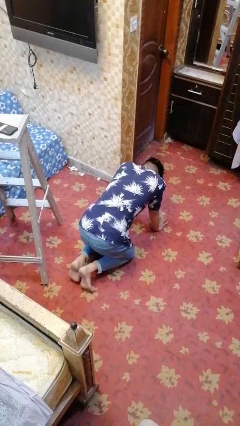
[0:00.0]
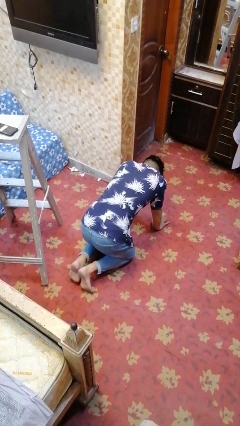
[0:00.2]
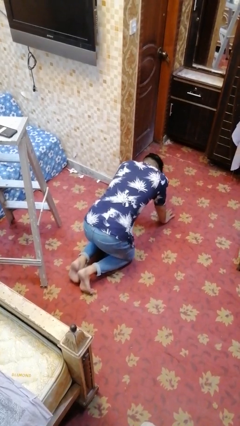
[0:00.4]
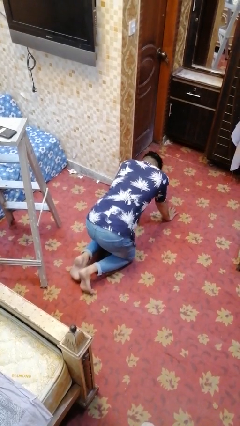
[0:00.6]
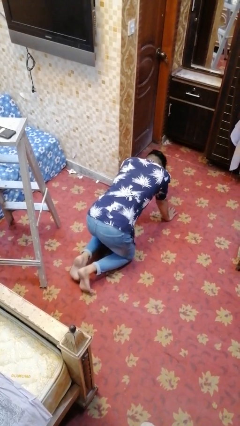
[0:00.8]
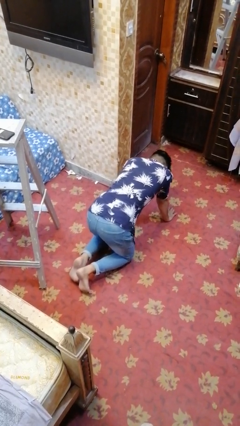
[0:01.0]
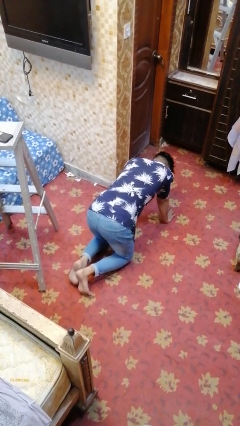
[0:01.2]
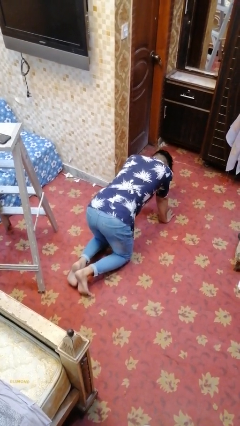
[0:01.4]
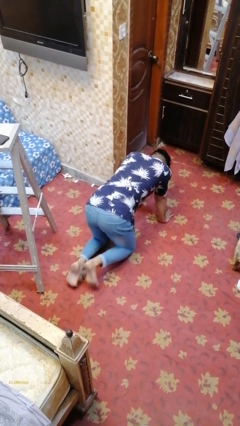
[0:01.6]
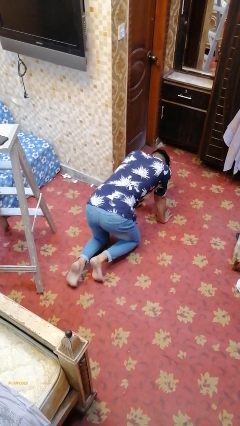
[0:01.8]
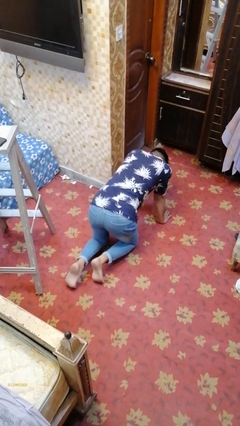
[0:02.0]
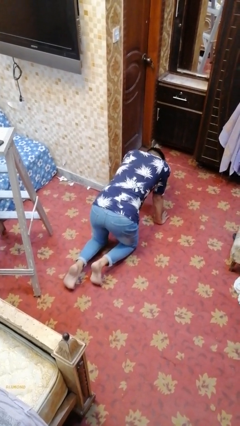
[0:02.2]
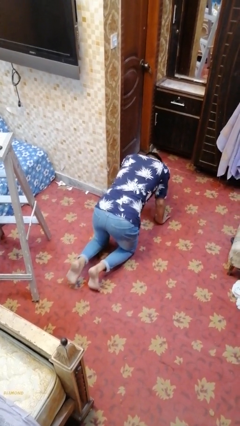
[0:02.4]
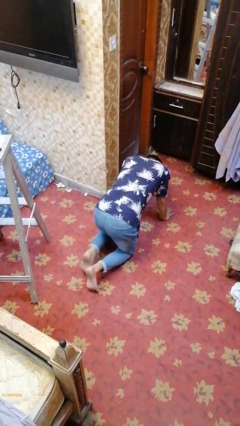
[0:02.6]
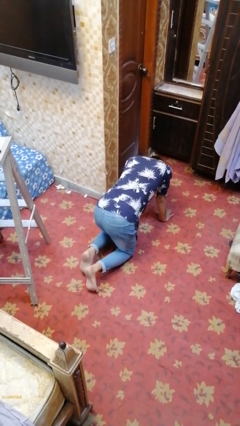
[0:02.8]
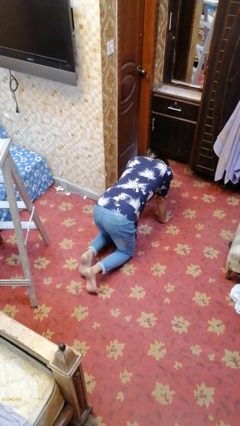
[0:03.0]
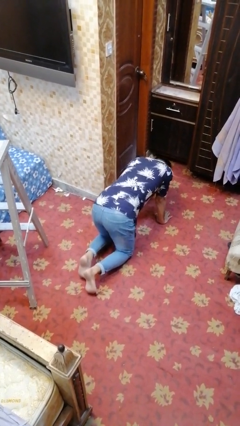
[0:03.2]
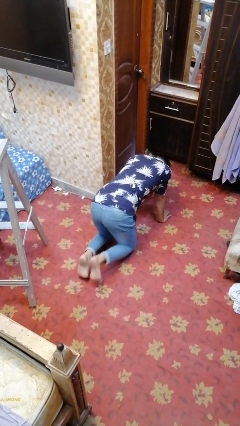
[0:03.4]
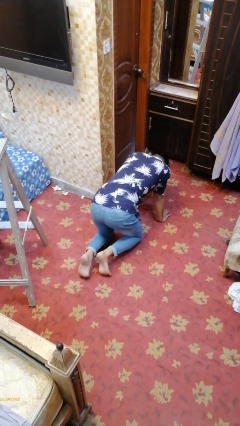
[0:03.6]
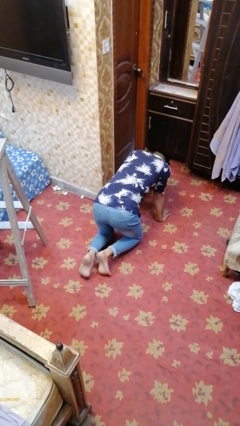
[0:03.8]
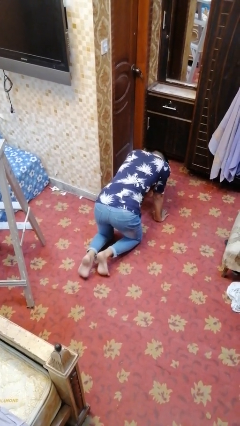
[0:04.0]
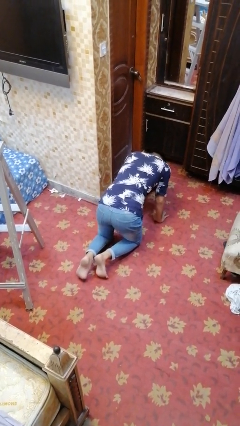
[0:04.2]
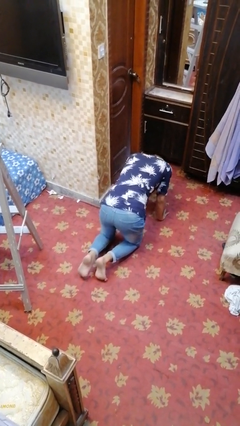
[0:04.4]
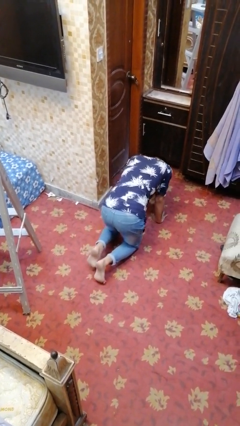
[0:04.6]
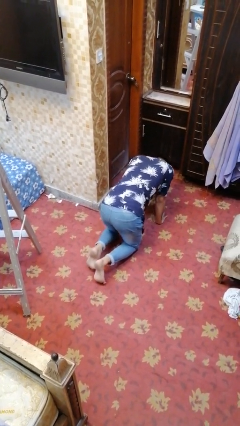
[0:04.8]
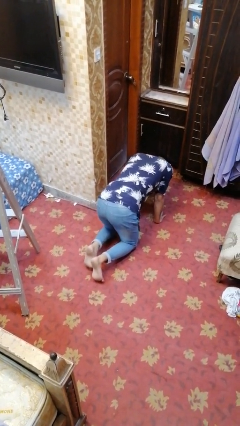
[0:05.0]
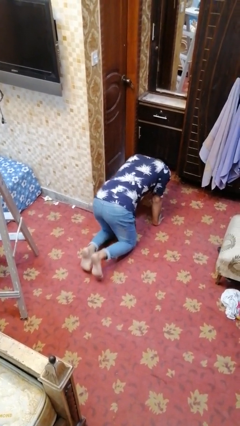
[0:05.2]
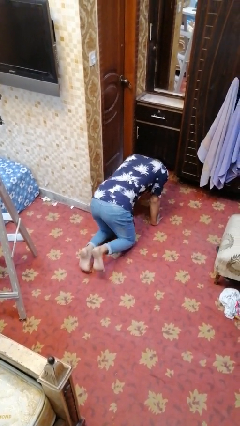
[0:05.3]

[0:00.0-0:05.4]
person crawls

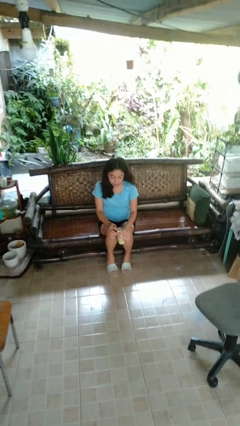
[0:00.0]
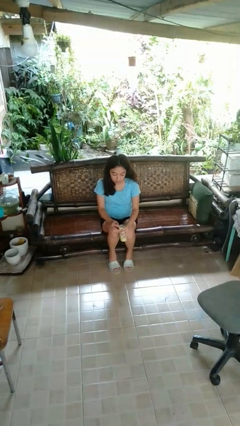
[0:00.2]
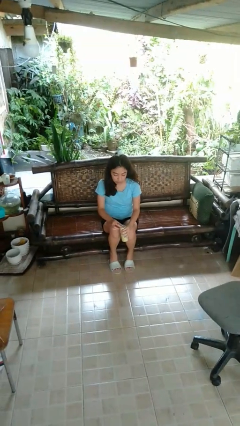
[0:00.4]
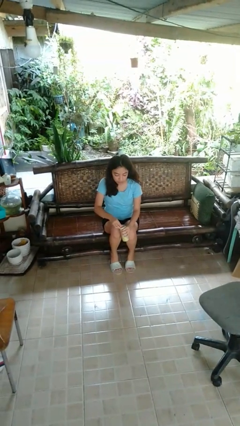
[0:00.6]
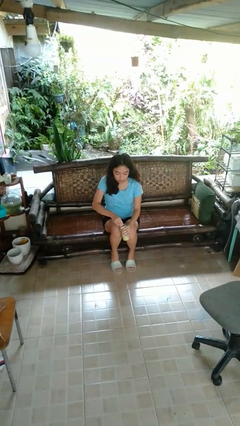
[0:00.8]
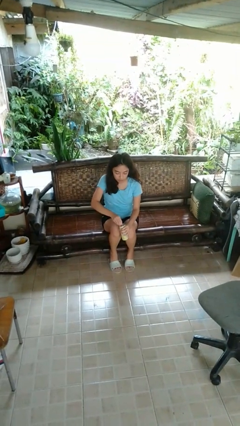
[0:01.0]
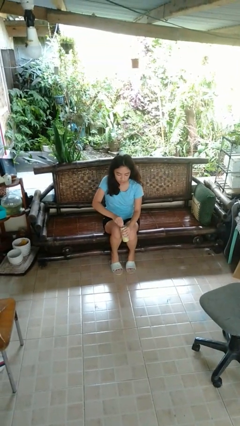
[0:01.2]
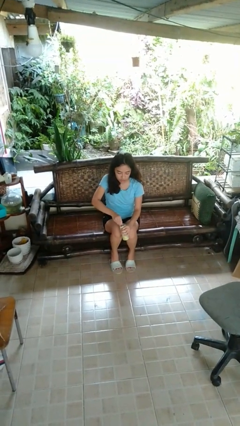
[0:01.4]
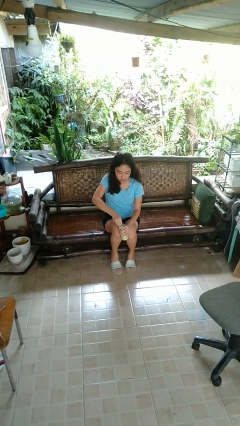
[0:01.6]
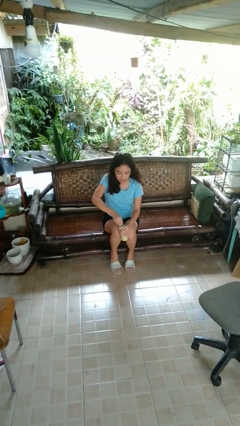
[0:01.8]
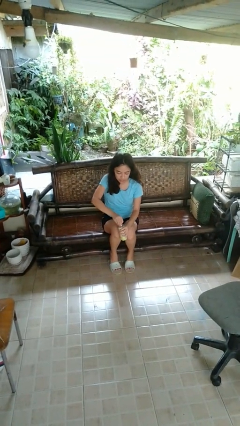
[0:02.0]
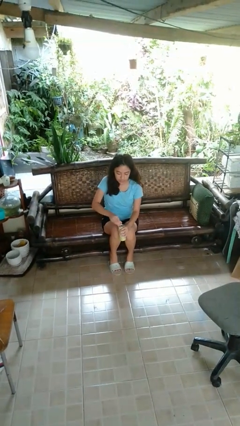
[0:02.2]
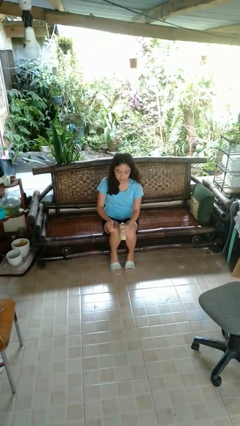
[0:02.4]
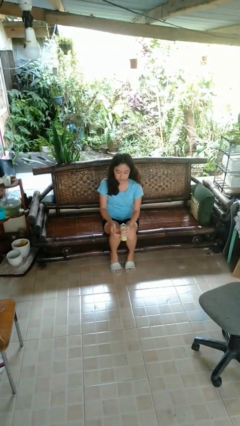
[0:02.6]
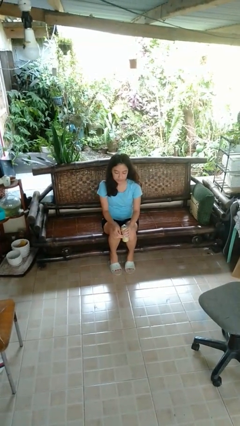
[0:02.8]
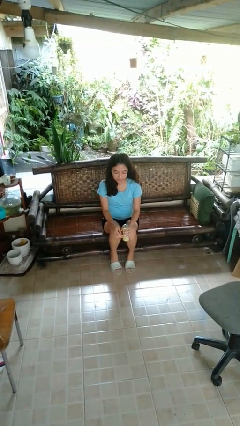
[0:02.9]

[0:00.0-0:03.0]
person opens beverage can

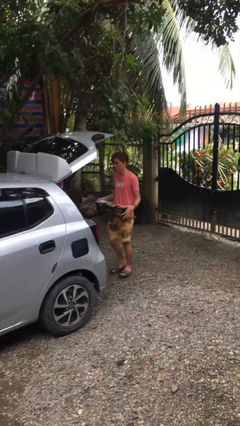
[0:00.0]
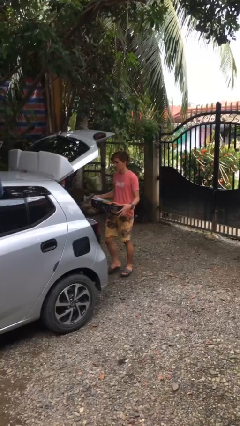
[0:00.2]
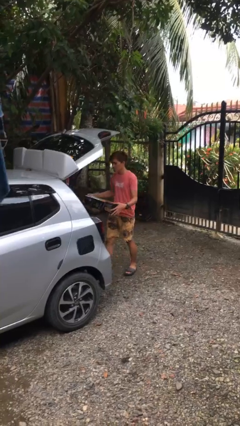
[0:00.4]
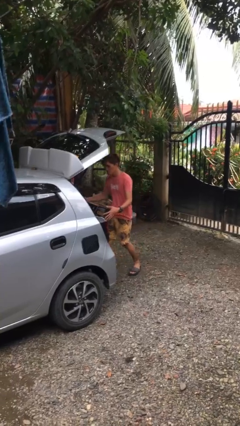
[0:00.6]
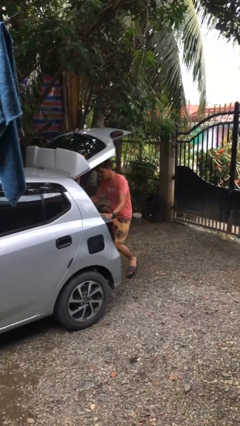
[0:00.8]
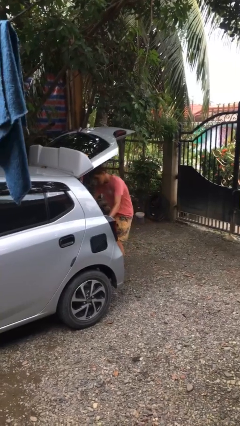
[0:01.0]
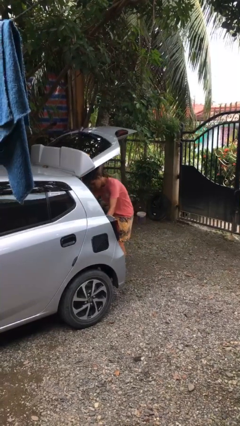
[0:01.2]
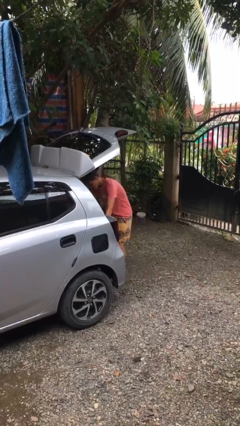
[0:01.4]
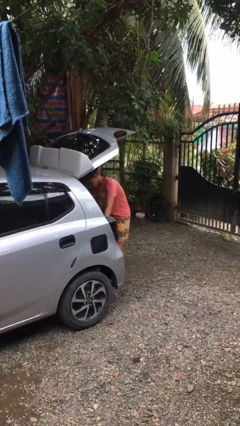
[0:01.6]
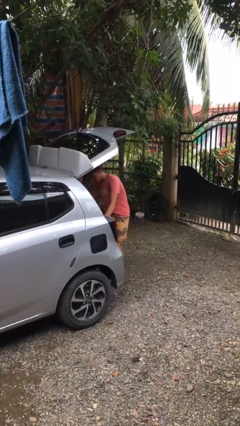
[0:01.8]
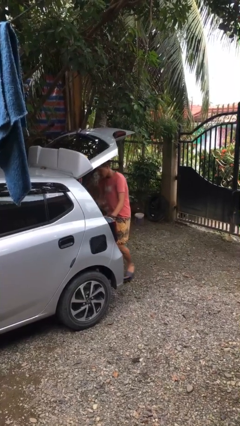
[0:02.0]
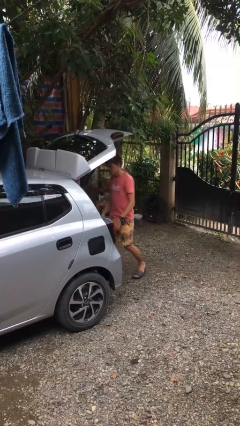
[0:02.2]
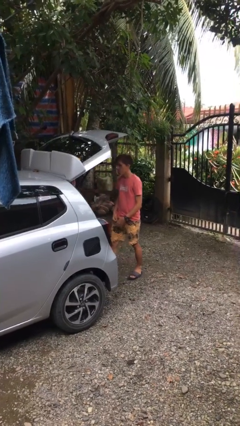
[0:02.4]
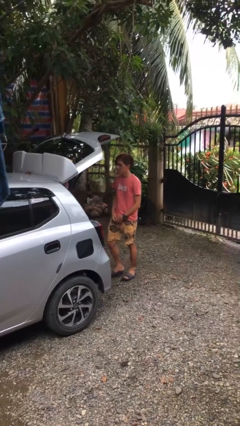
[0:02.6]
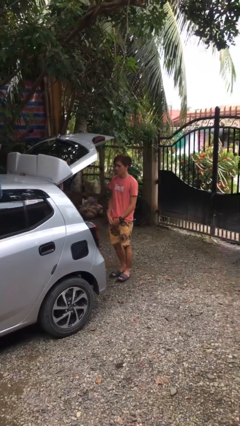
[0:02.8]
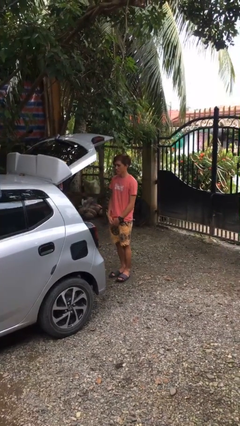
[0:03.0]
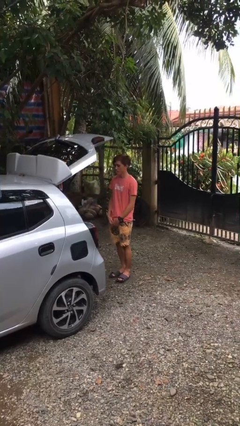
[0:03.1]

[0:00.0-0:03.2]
person loads car

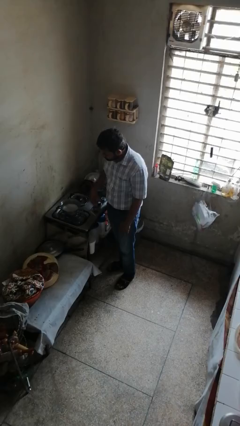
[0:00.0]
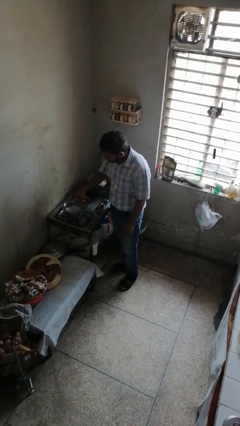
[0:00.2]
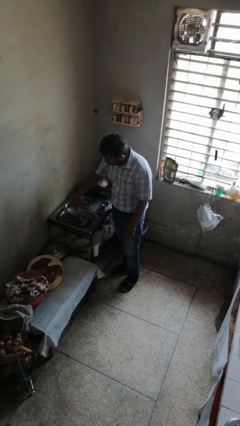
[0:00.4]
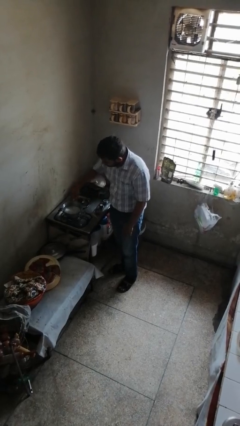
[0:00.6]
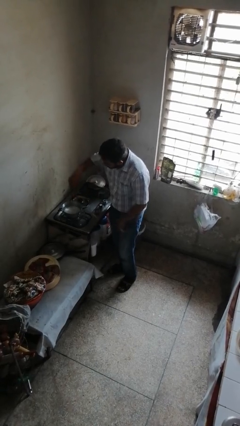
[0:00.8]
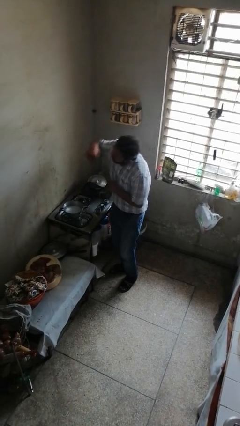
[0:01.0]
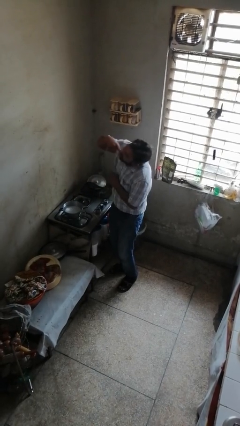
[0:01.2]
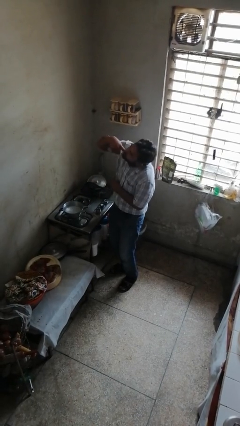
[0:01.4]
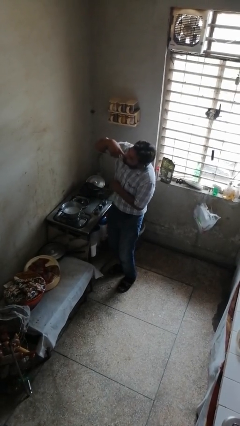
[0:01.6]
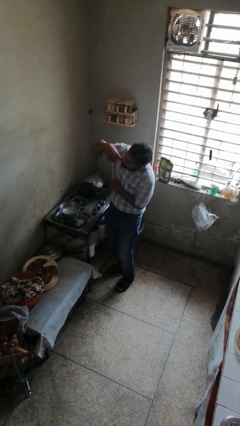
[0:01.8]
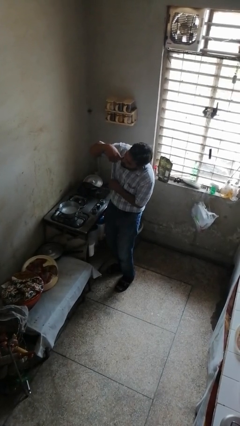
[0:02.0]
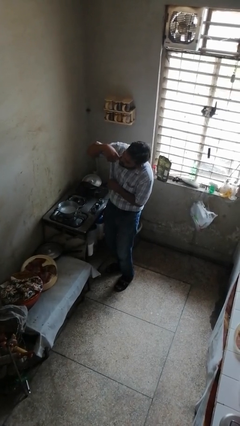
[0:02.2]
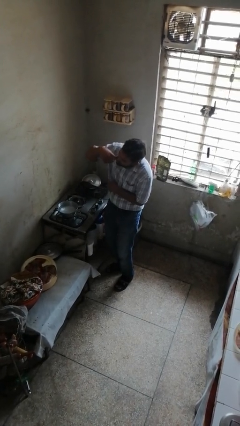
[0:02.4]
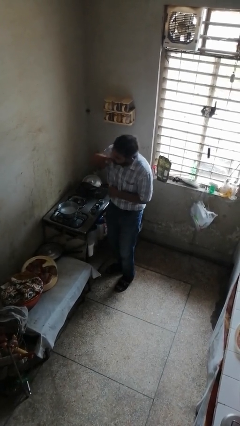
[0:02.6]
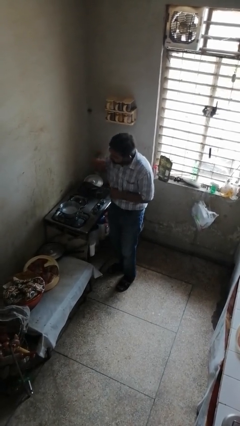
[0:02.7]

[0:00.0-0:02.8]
person burns hand

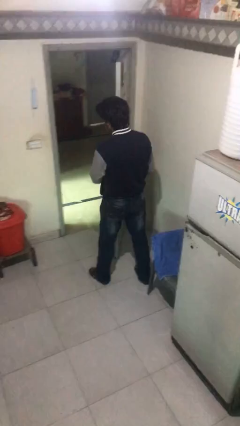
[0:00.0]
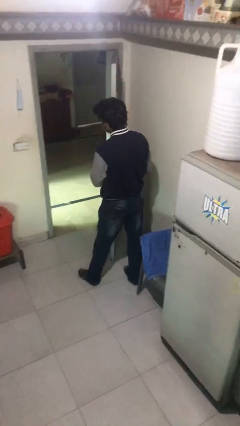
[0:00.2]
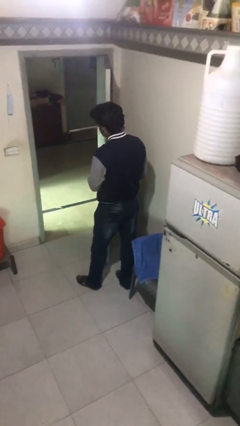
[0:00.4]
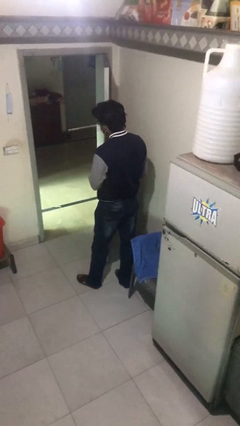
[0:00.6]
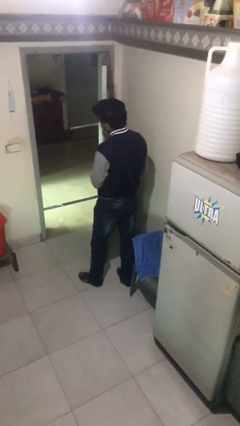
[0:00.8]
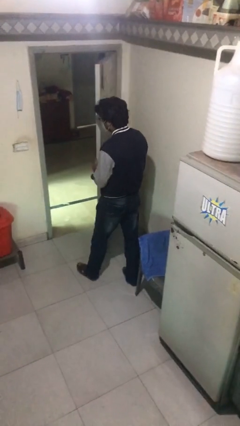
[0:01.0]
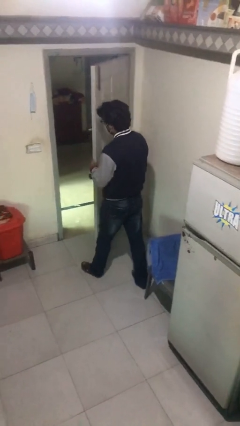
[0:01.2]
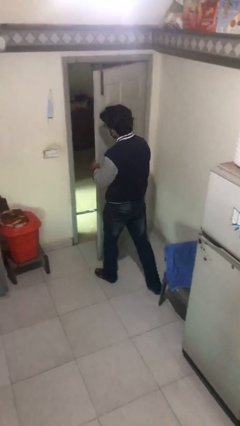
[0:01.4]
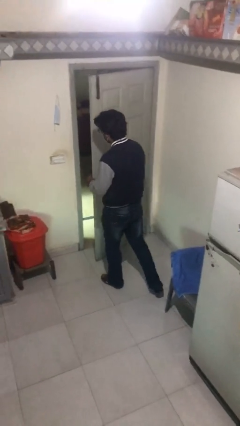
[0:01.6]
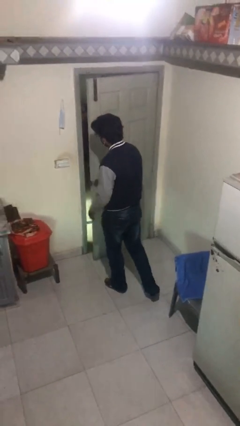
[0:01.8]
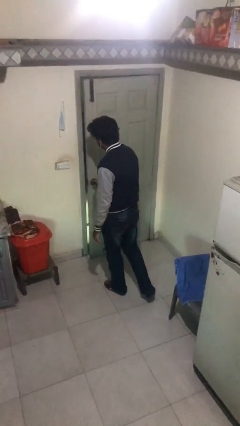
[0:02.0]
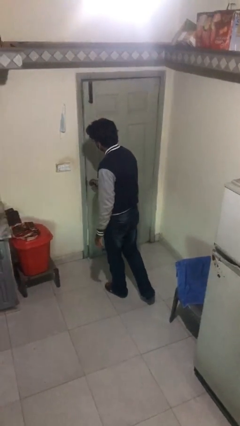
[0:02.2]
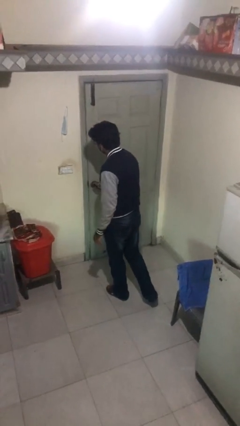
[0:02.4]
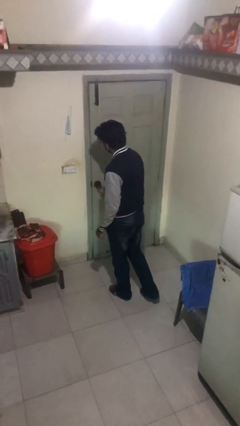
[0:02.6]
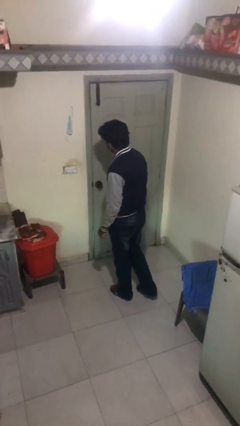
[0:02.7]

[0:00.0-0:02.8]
person closes facility door

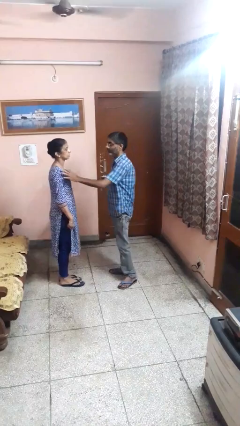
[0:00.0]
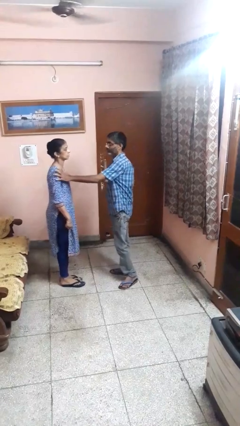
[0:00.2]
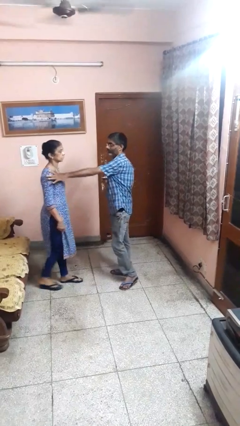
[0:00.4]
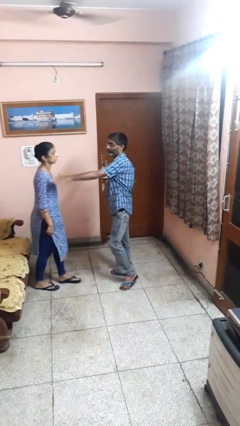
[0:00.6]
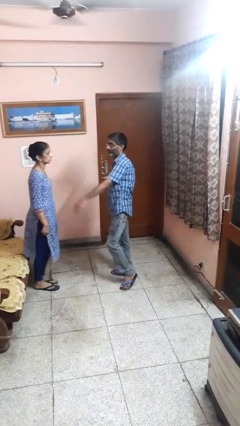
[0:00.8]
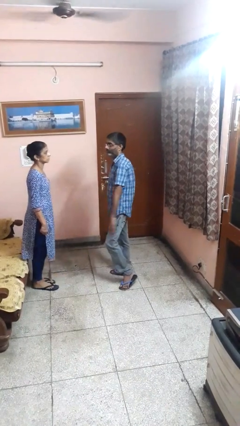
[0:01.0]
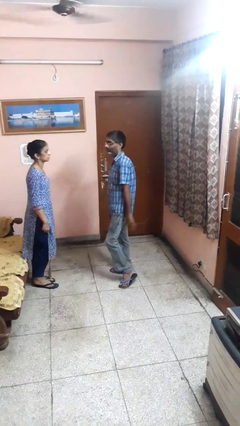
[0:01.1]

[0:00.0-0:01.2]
person shoves person
